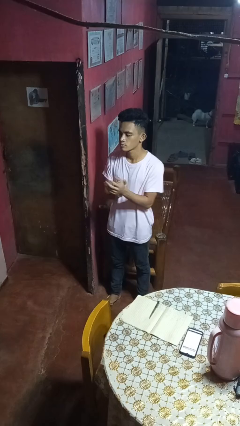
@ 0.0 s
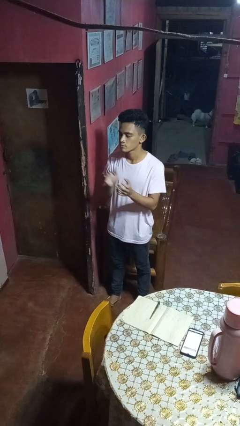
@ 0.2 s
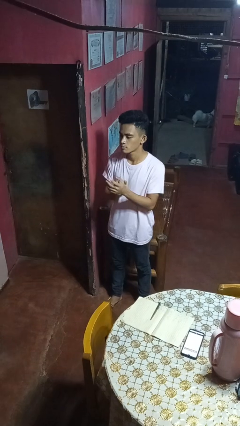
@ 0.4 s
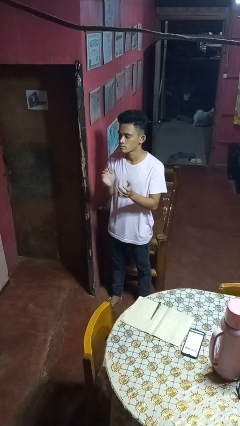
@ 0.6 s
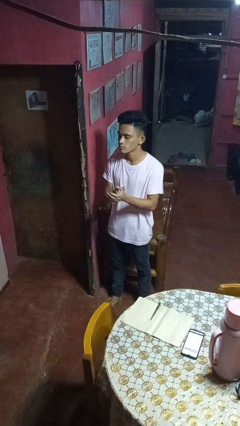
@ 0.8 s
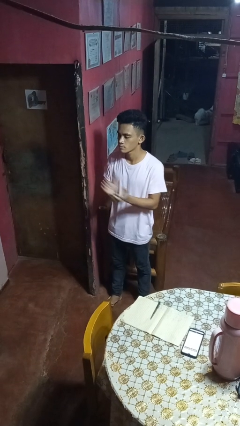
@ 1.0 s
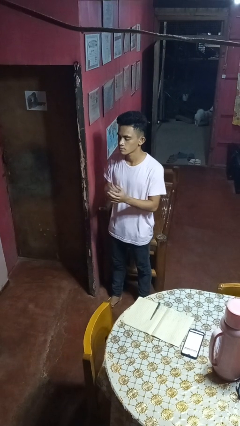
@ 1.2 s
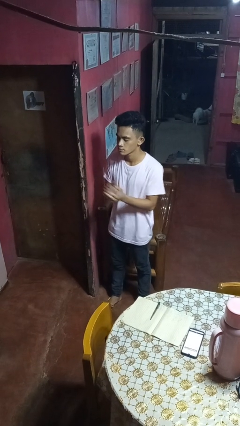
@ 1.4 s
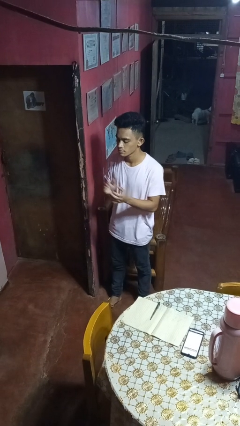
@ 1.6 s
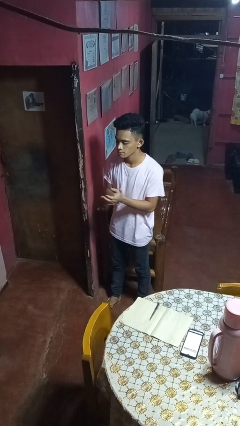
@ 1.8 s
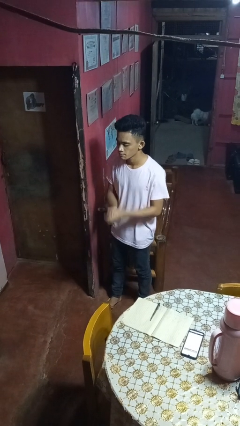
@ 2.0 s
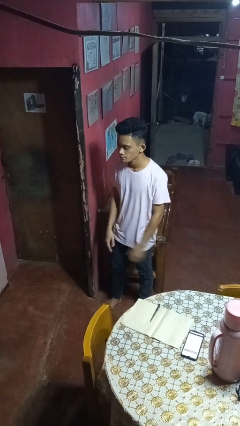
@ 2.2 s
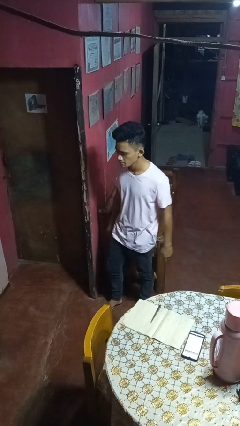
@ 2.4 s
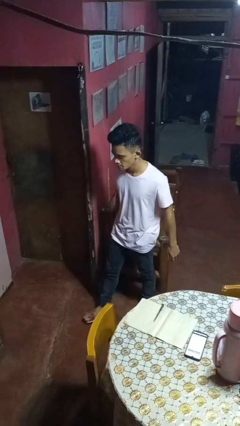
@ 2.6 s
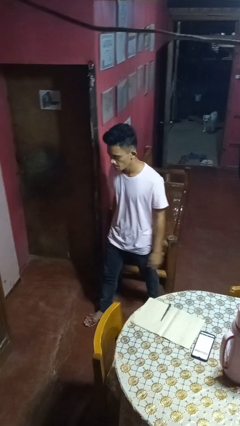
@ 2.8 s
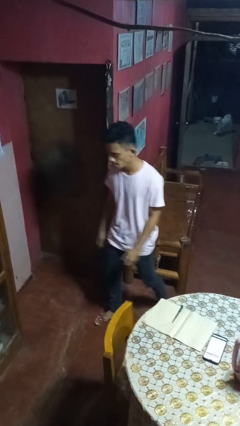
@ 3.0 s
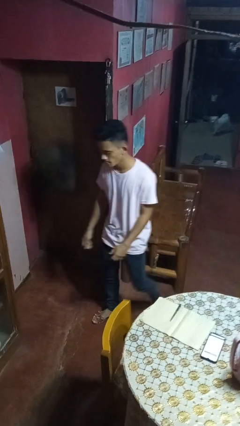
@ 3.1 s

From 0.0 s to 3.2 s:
person claps hands

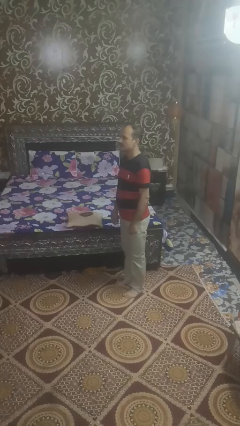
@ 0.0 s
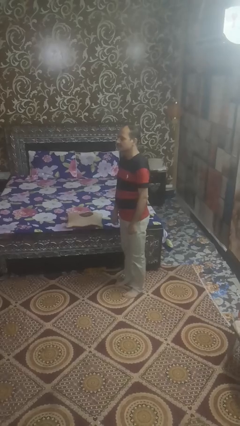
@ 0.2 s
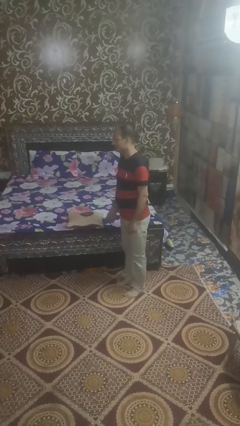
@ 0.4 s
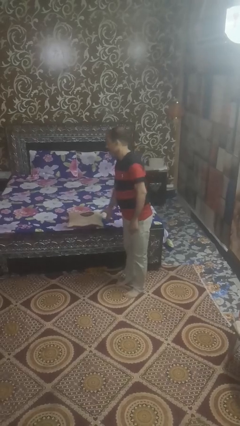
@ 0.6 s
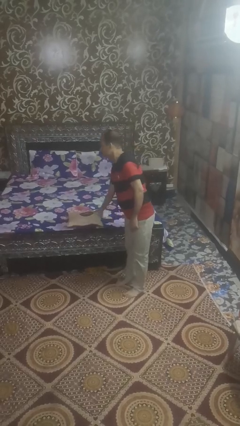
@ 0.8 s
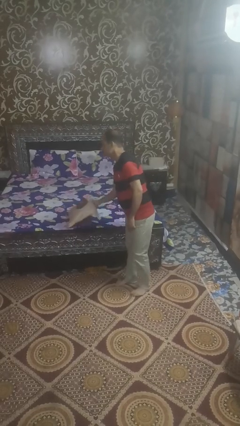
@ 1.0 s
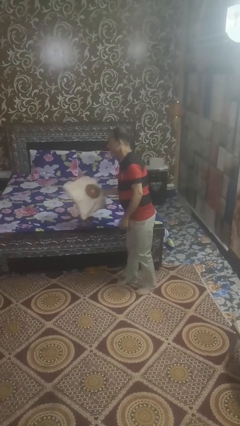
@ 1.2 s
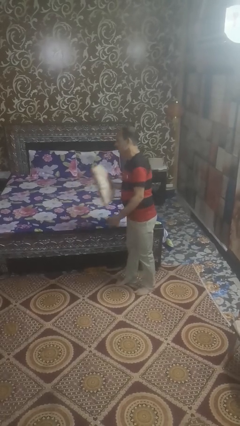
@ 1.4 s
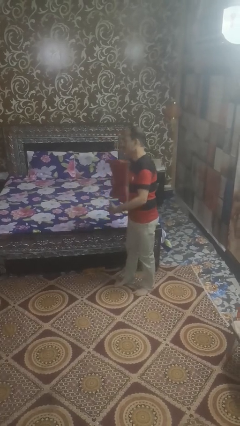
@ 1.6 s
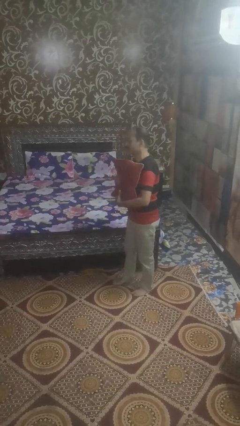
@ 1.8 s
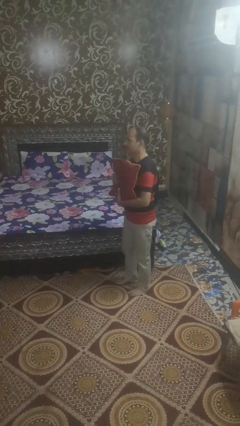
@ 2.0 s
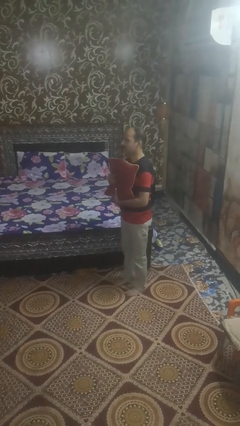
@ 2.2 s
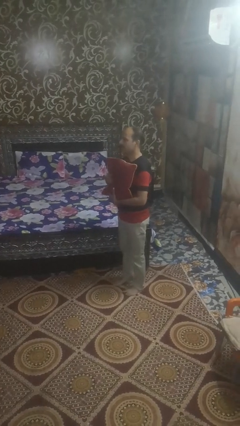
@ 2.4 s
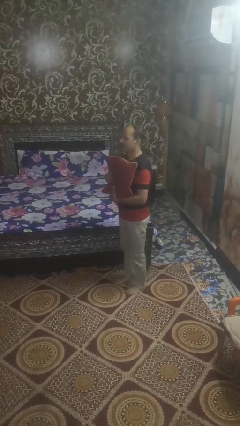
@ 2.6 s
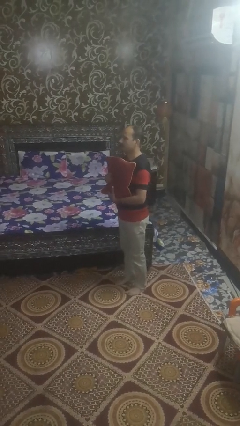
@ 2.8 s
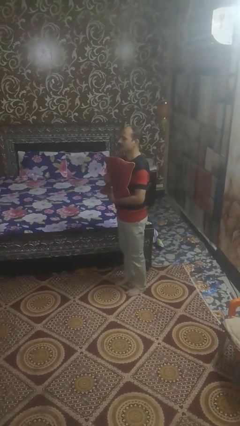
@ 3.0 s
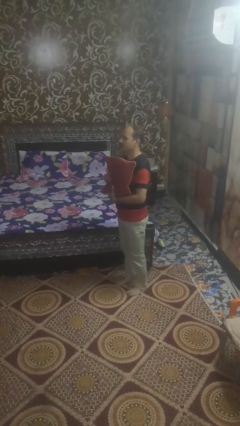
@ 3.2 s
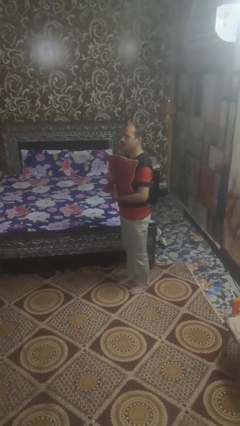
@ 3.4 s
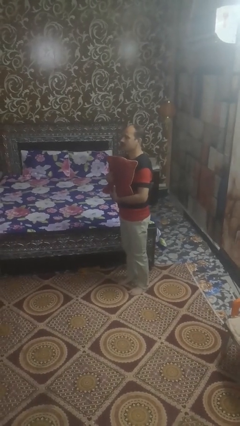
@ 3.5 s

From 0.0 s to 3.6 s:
person picks up object from bed

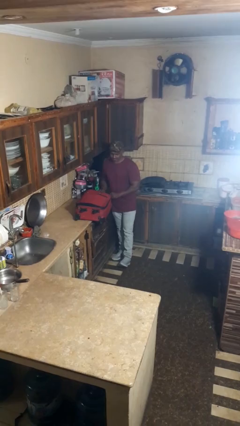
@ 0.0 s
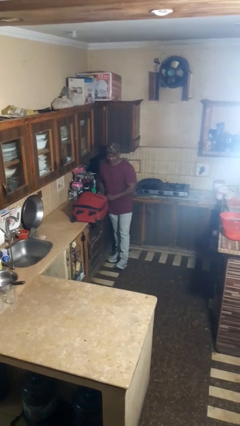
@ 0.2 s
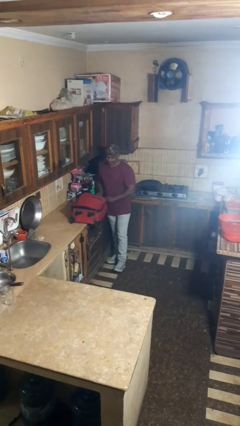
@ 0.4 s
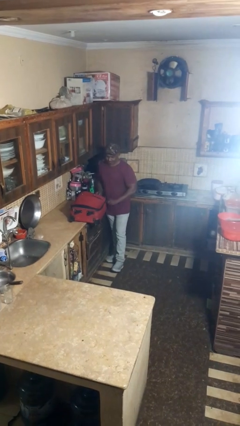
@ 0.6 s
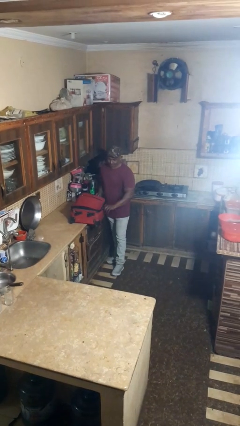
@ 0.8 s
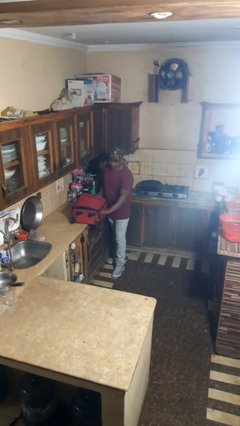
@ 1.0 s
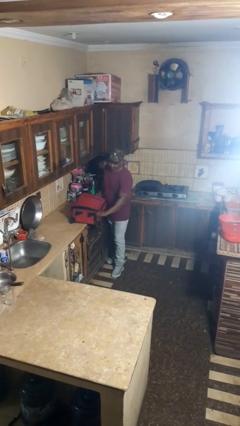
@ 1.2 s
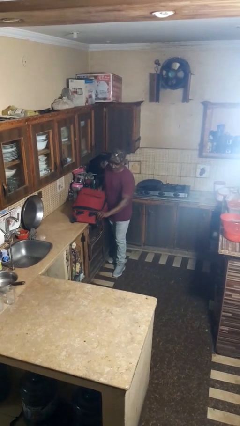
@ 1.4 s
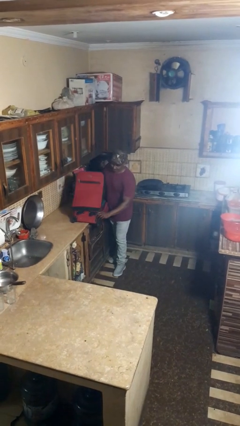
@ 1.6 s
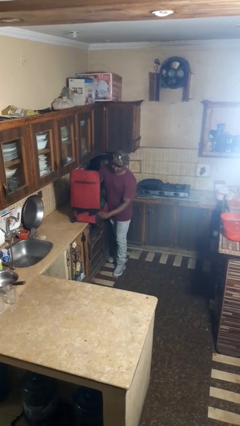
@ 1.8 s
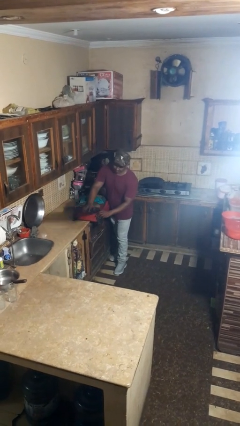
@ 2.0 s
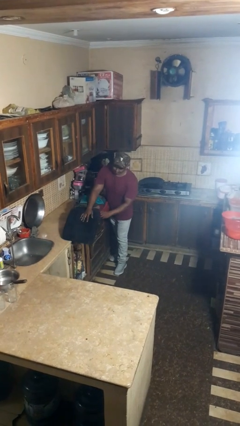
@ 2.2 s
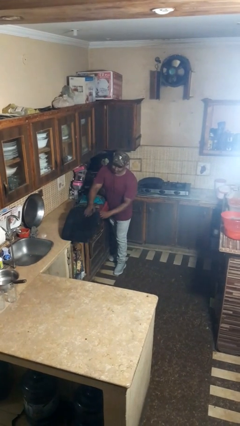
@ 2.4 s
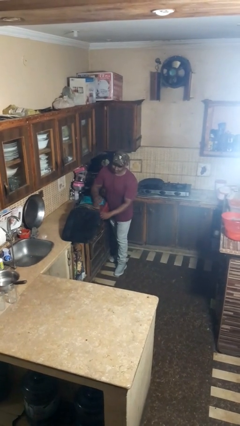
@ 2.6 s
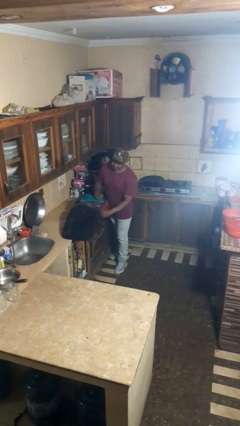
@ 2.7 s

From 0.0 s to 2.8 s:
person opens suitcase

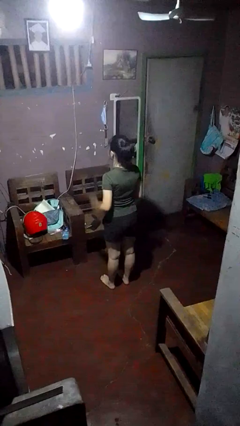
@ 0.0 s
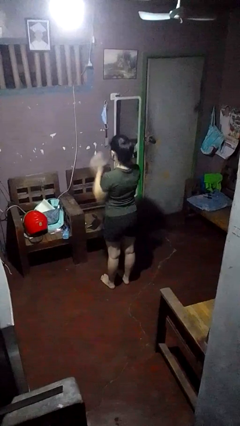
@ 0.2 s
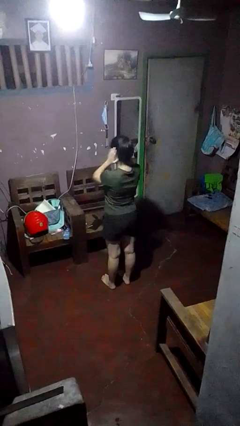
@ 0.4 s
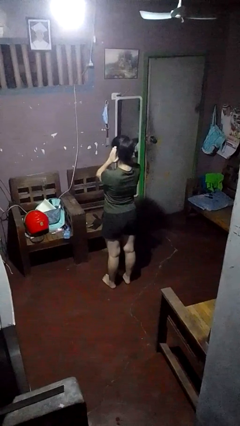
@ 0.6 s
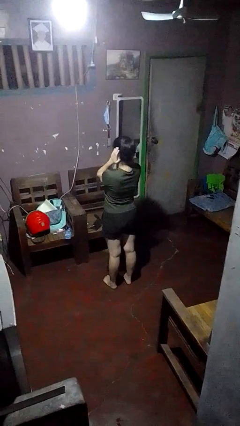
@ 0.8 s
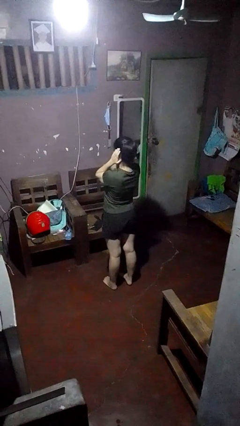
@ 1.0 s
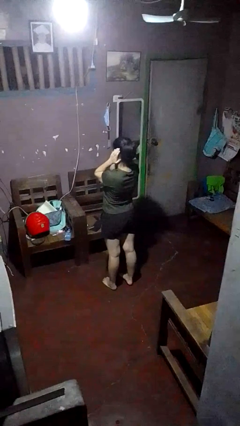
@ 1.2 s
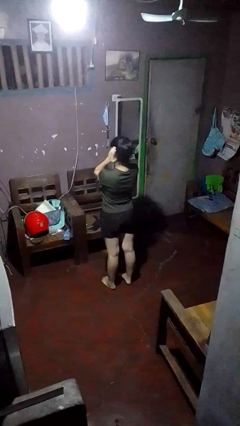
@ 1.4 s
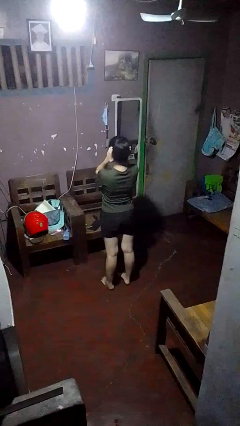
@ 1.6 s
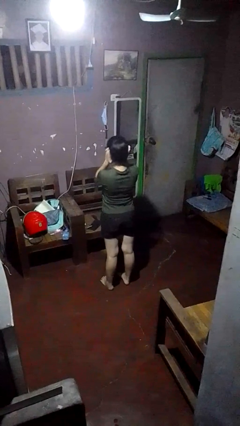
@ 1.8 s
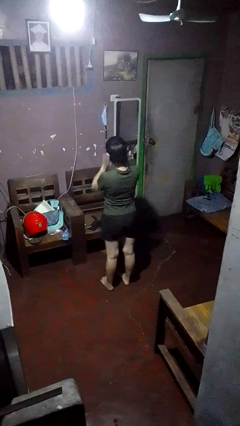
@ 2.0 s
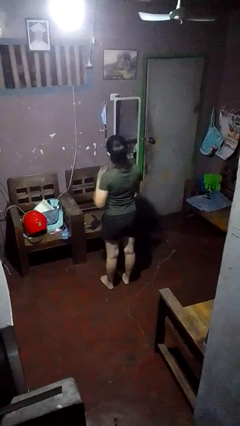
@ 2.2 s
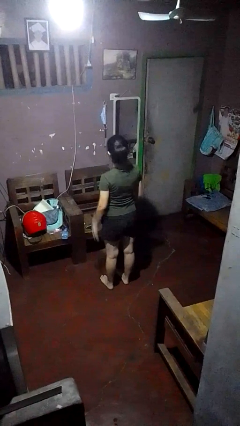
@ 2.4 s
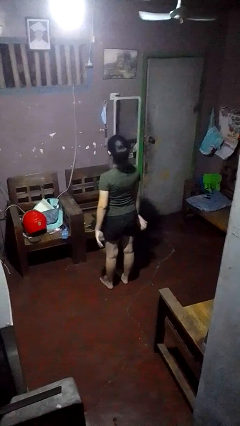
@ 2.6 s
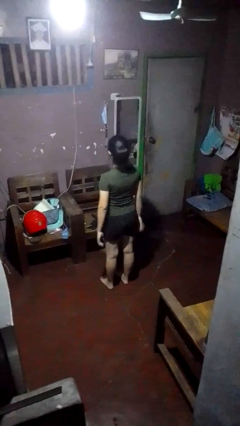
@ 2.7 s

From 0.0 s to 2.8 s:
person puts fingers in ear

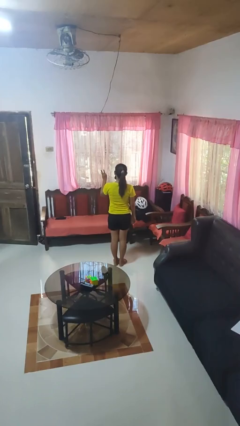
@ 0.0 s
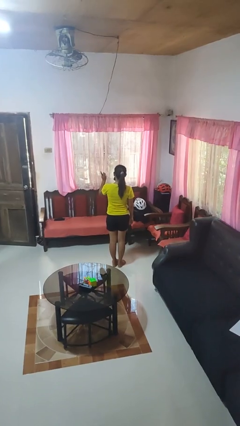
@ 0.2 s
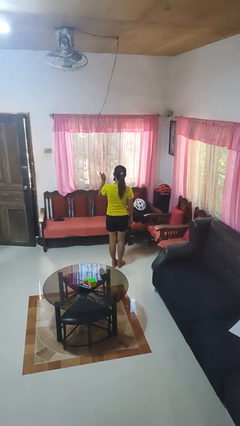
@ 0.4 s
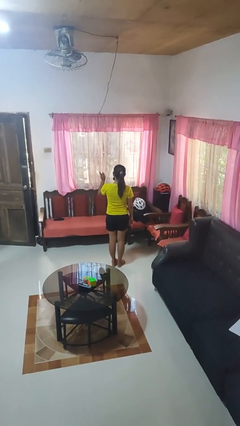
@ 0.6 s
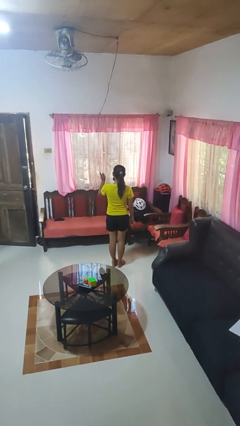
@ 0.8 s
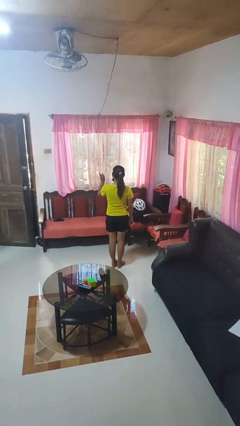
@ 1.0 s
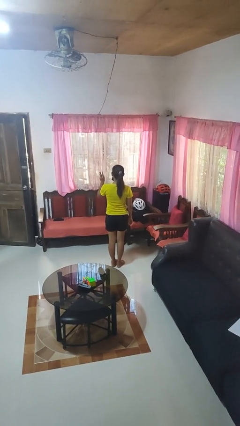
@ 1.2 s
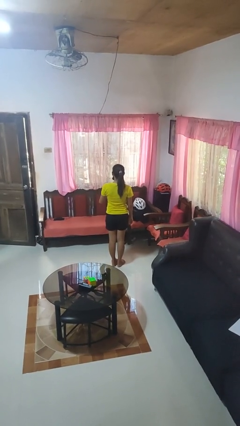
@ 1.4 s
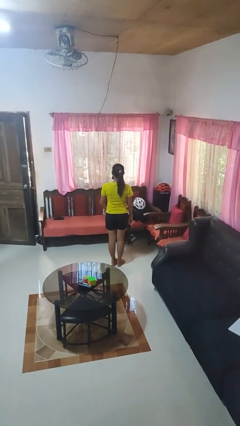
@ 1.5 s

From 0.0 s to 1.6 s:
person gestures number three

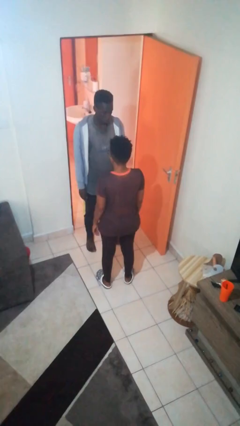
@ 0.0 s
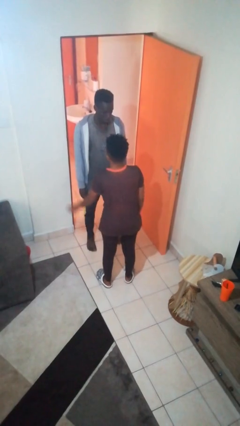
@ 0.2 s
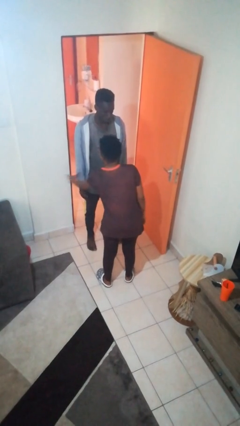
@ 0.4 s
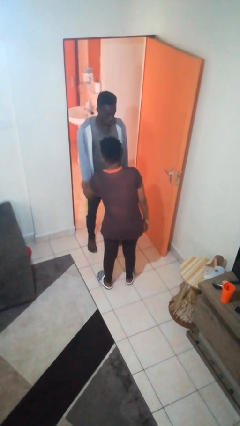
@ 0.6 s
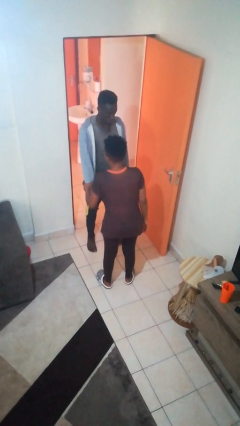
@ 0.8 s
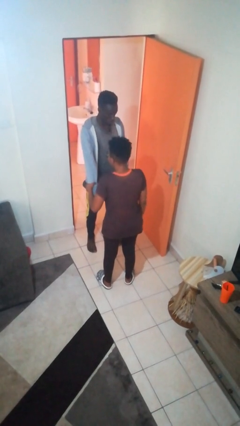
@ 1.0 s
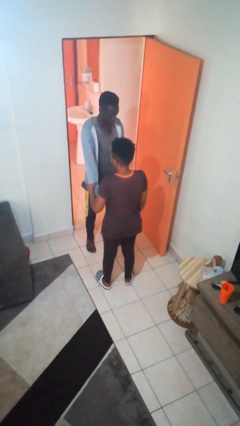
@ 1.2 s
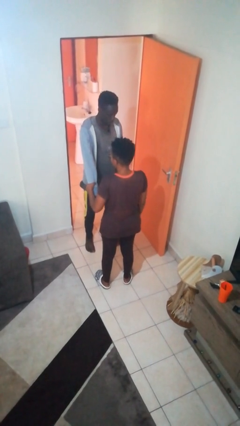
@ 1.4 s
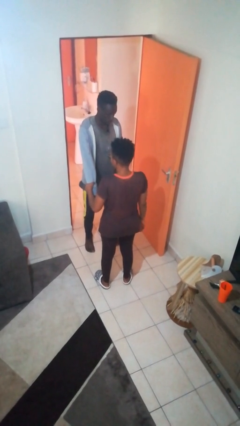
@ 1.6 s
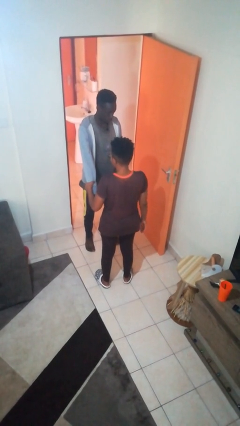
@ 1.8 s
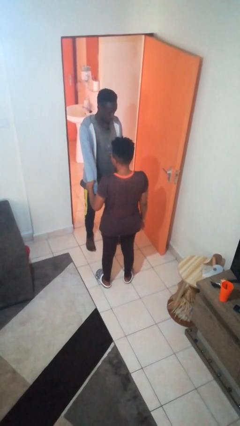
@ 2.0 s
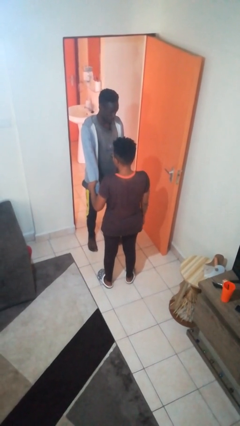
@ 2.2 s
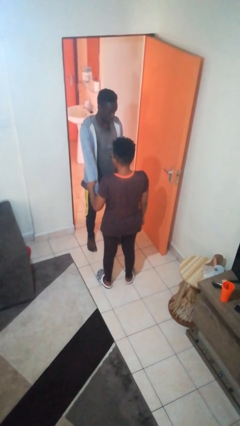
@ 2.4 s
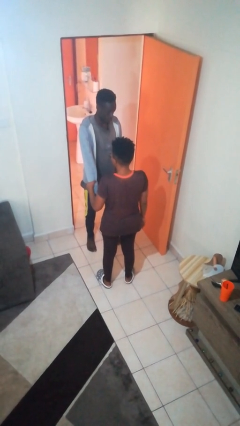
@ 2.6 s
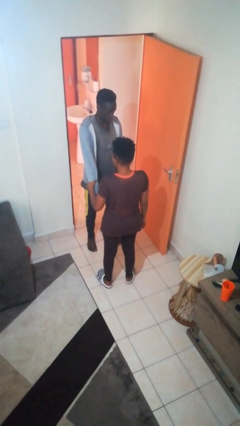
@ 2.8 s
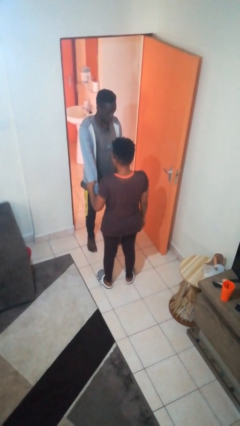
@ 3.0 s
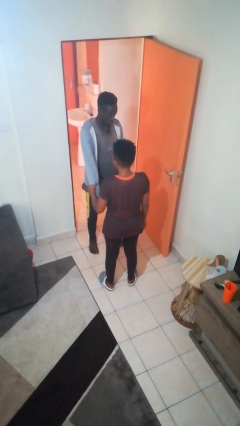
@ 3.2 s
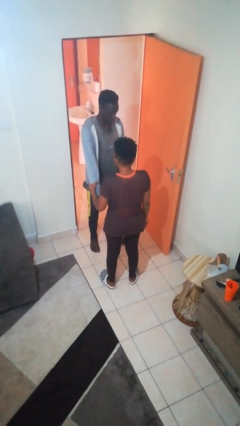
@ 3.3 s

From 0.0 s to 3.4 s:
person grabs person by forearm
